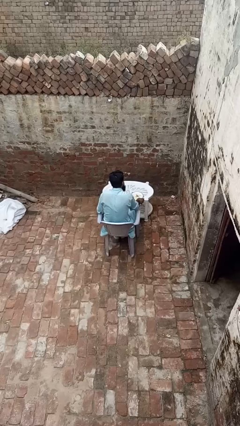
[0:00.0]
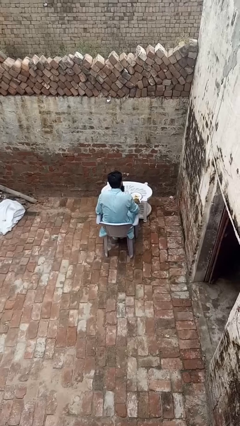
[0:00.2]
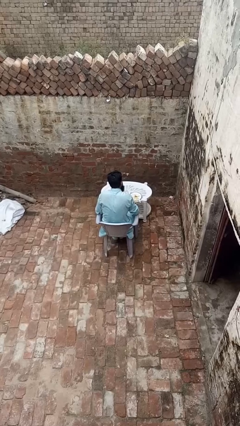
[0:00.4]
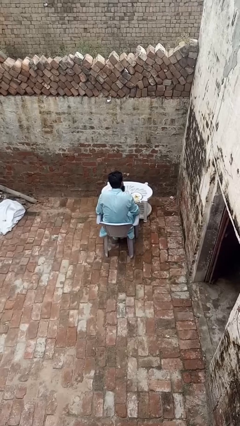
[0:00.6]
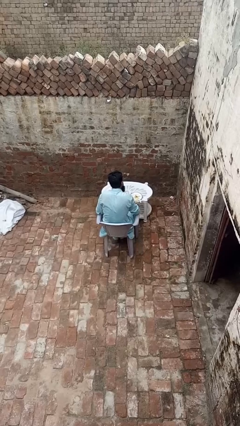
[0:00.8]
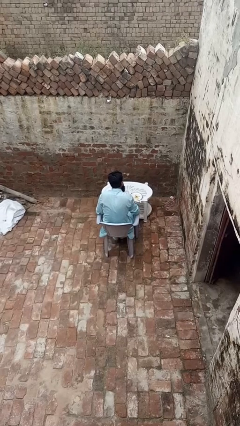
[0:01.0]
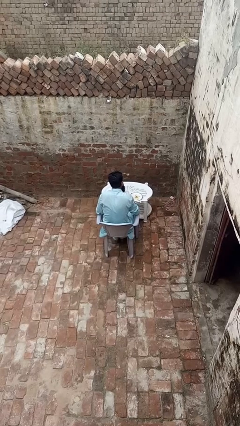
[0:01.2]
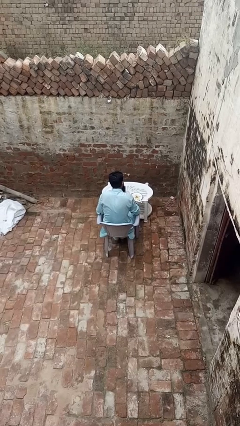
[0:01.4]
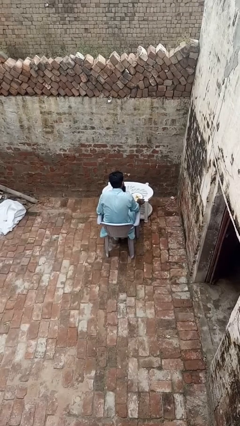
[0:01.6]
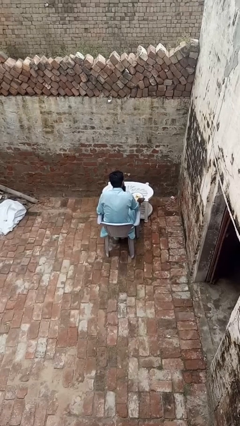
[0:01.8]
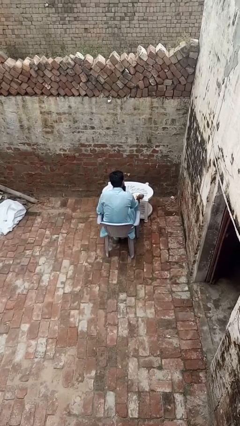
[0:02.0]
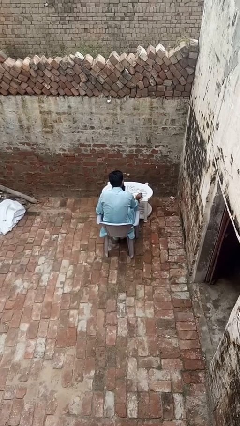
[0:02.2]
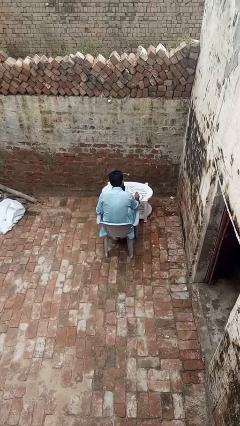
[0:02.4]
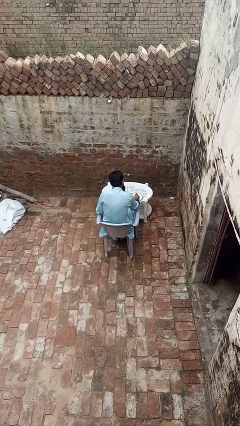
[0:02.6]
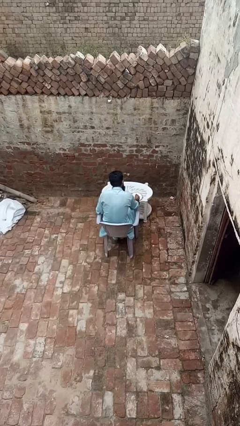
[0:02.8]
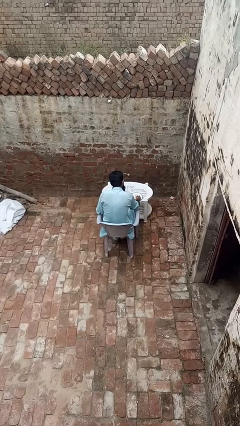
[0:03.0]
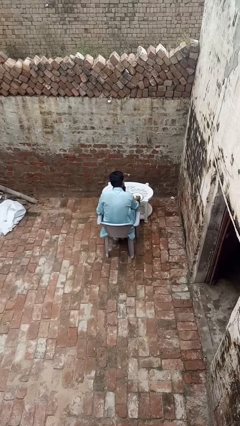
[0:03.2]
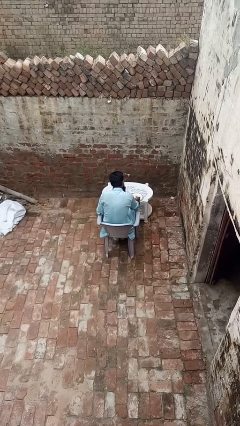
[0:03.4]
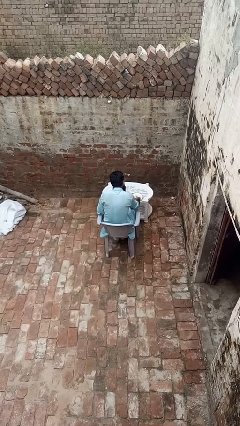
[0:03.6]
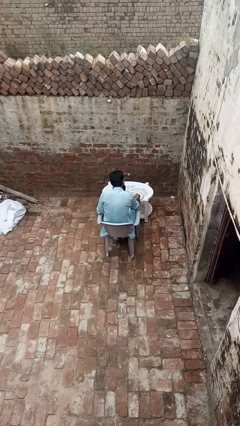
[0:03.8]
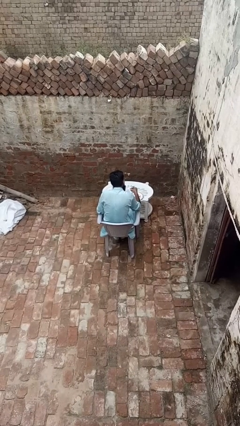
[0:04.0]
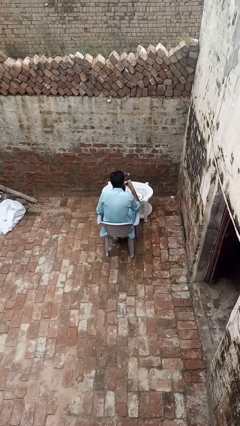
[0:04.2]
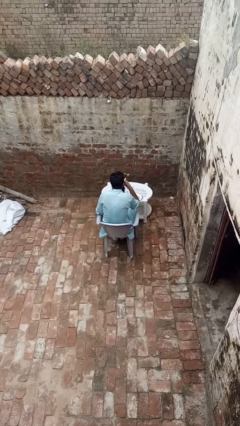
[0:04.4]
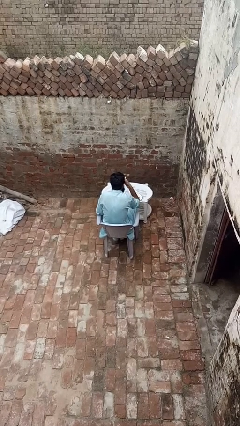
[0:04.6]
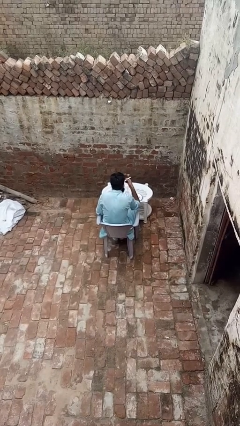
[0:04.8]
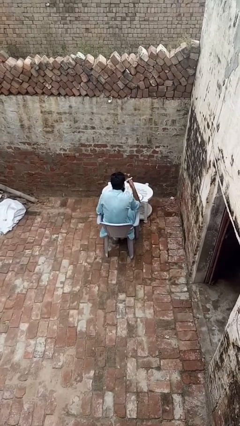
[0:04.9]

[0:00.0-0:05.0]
person eats with utensil

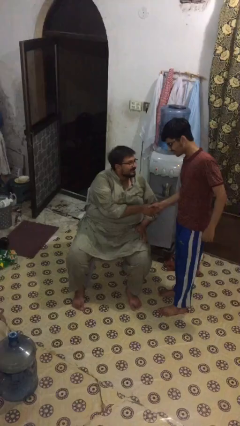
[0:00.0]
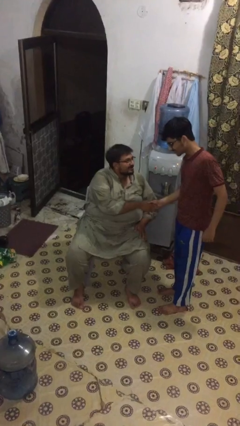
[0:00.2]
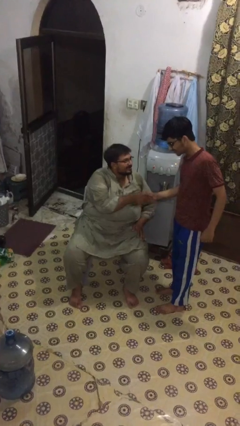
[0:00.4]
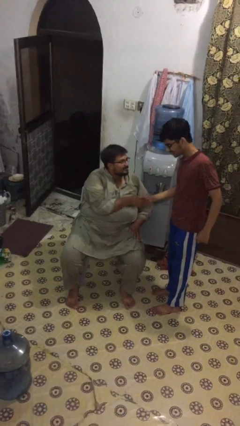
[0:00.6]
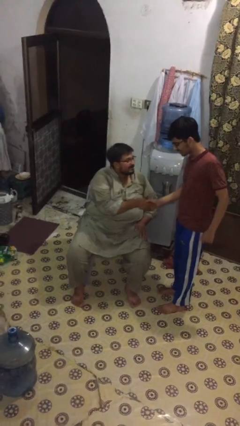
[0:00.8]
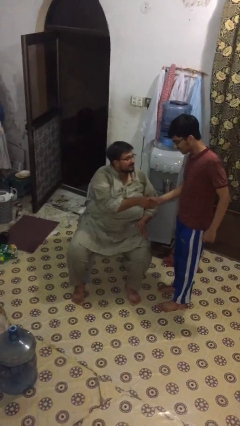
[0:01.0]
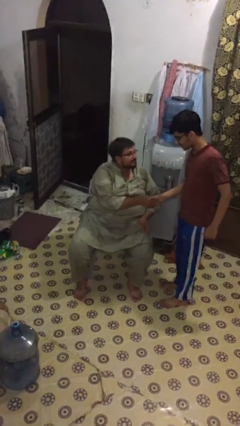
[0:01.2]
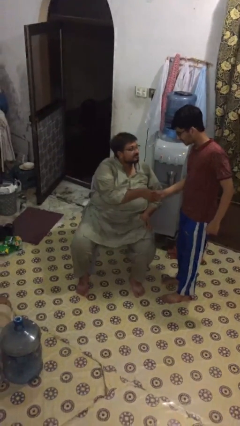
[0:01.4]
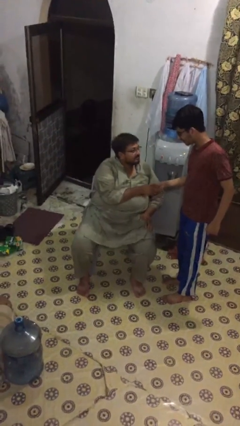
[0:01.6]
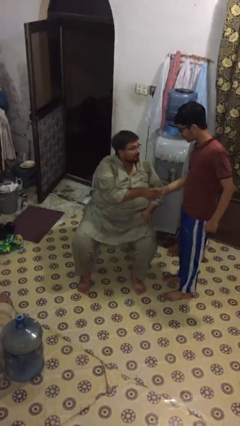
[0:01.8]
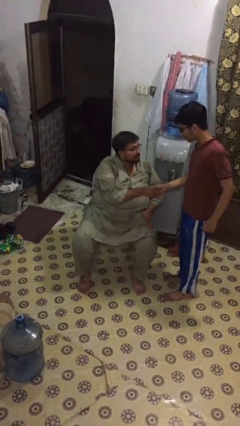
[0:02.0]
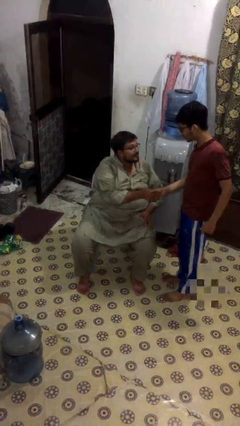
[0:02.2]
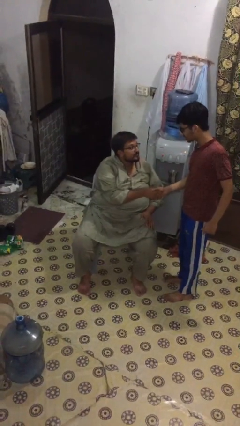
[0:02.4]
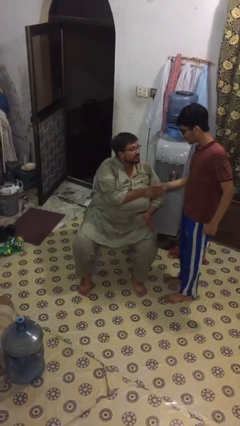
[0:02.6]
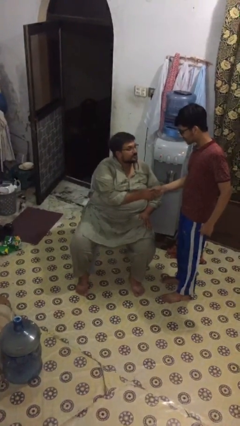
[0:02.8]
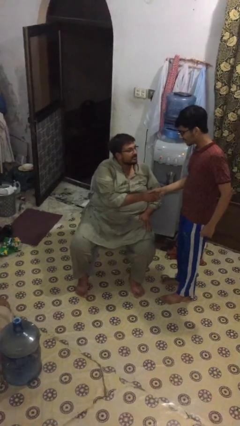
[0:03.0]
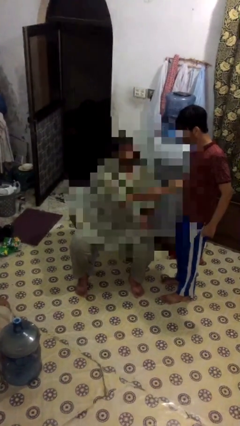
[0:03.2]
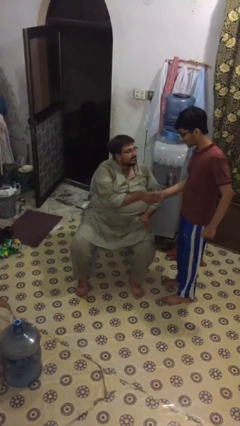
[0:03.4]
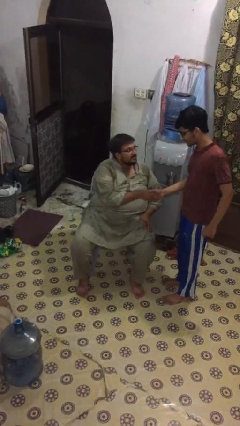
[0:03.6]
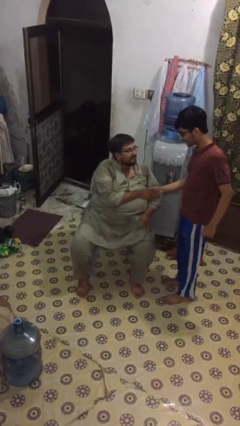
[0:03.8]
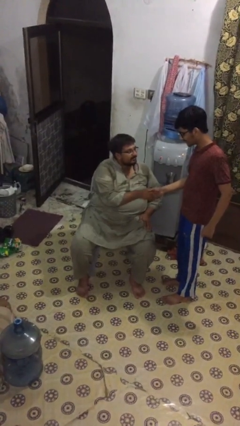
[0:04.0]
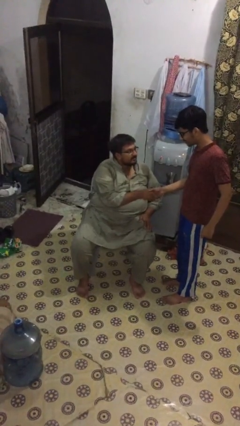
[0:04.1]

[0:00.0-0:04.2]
person shakes hand

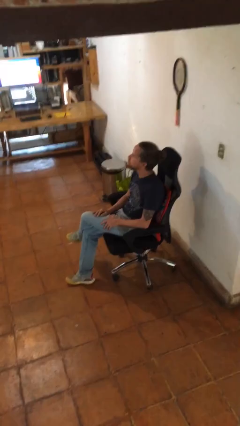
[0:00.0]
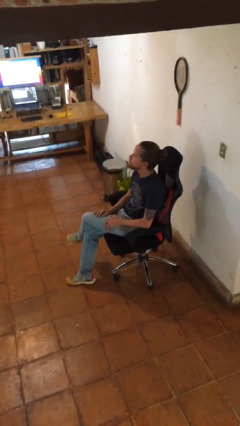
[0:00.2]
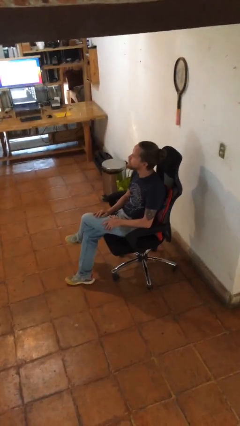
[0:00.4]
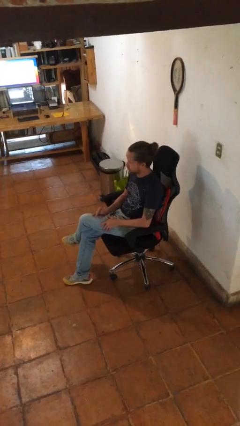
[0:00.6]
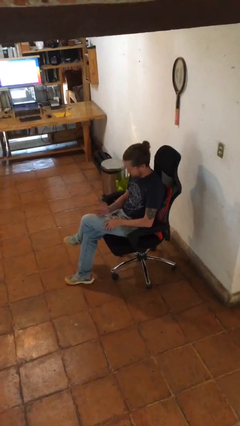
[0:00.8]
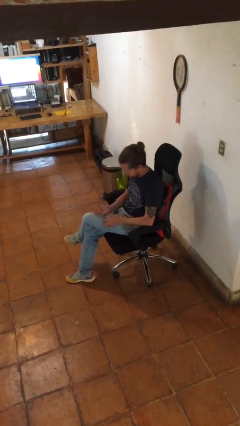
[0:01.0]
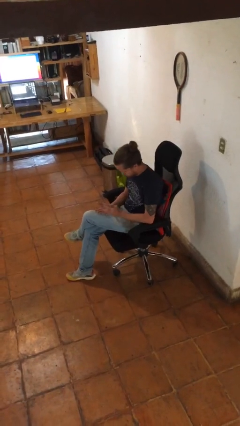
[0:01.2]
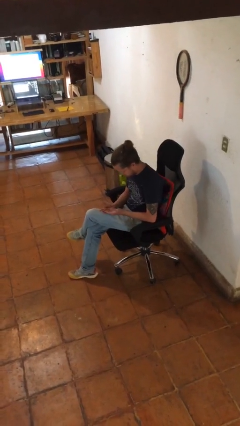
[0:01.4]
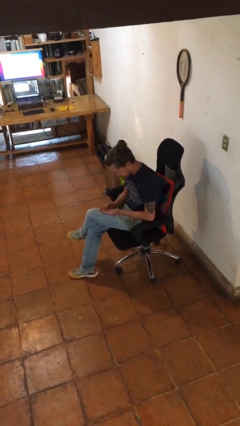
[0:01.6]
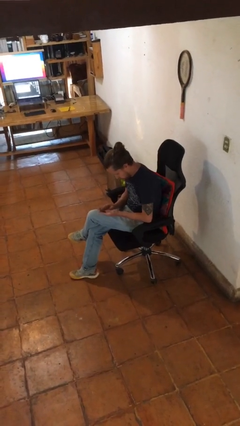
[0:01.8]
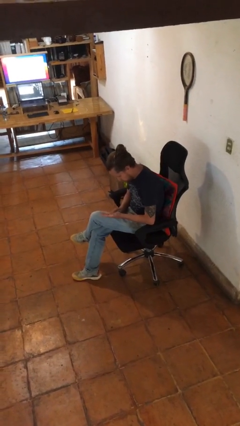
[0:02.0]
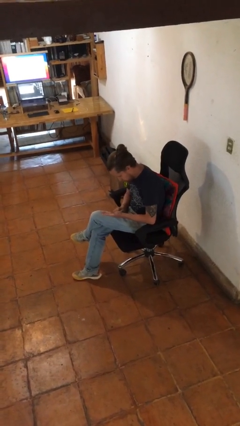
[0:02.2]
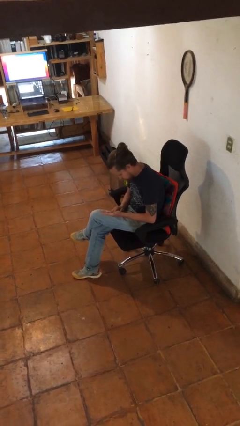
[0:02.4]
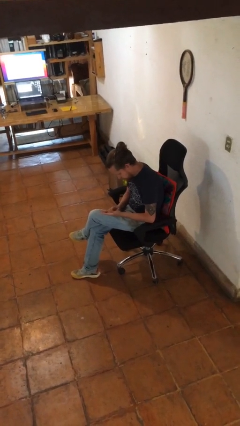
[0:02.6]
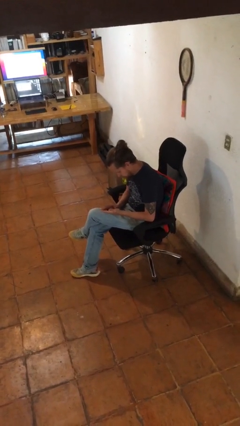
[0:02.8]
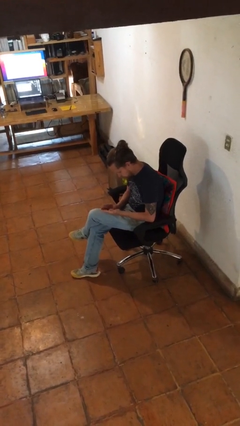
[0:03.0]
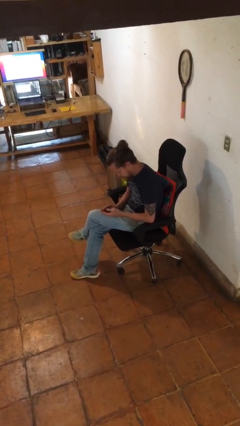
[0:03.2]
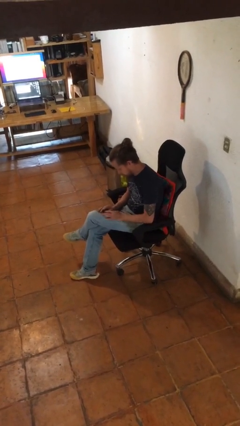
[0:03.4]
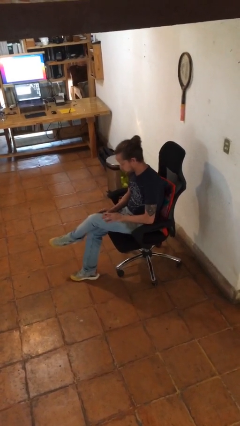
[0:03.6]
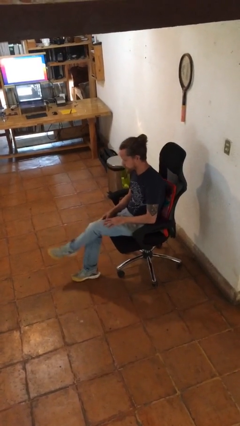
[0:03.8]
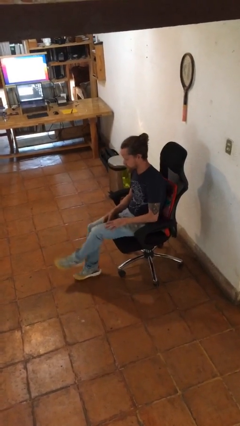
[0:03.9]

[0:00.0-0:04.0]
person looks at hands in lap

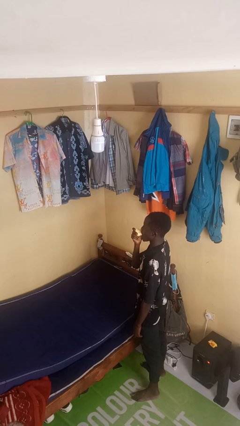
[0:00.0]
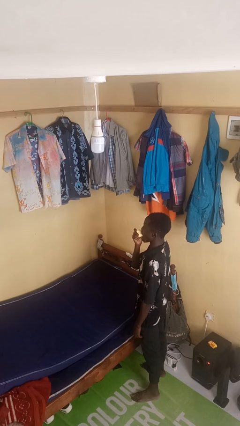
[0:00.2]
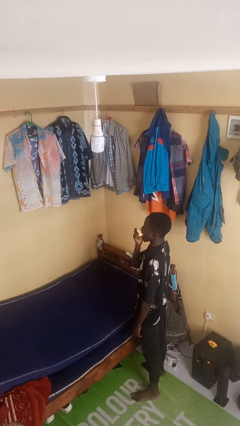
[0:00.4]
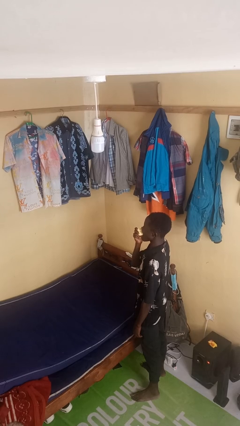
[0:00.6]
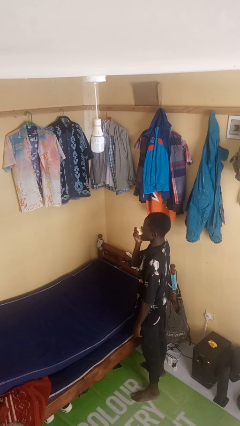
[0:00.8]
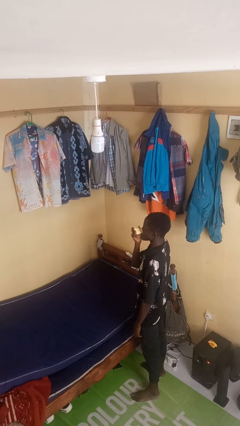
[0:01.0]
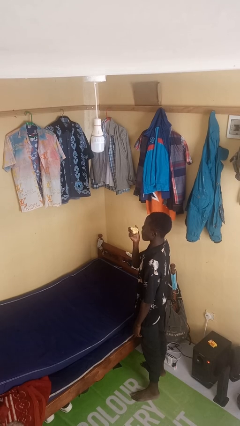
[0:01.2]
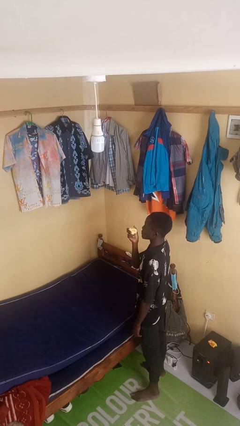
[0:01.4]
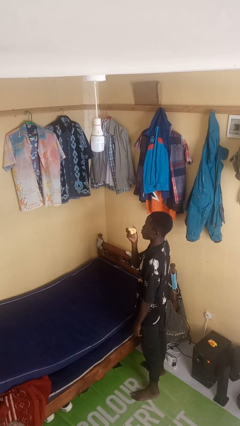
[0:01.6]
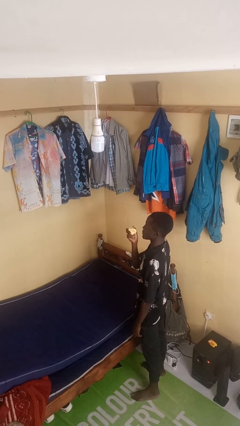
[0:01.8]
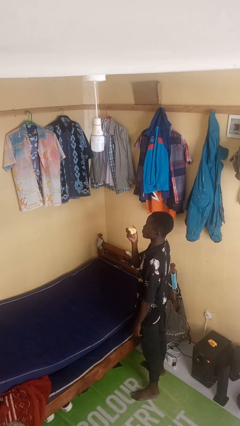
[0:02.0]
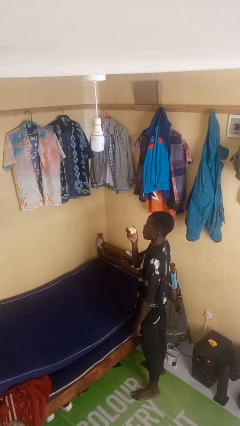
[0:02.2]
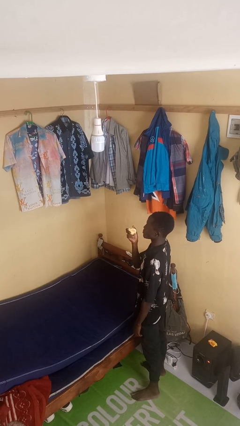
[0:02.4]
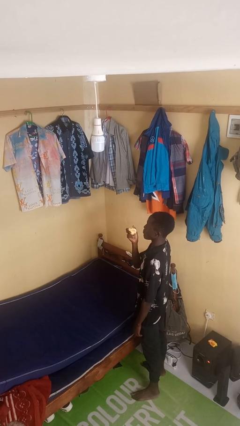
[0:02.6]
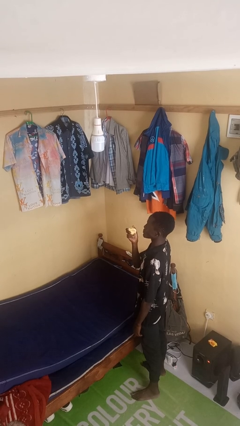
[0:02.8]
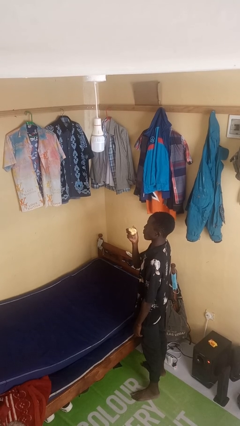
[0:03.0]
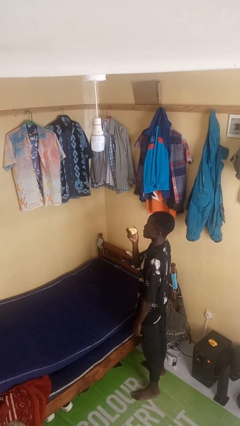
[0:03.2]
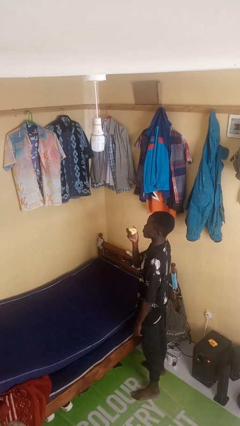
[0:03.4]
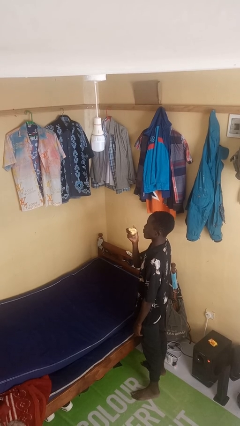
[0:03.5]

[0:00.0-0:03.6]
person eats apple

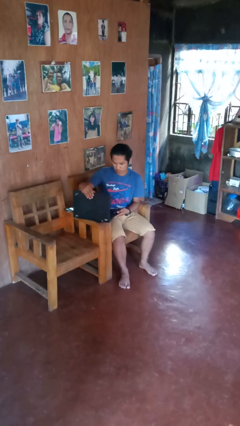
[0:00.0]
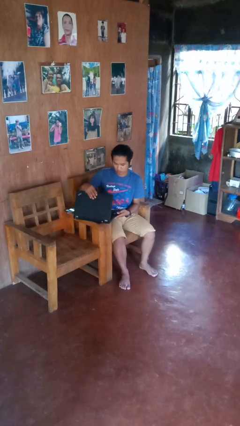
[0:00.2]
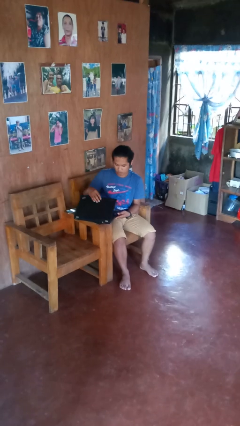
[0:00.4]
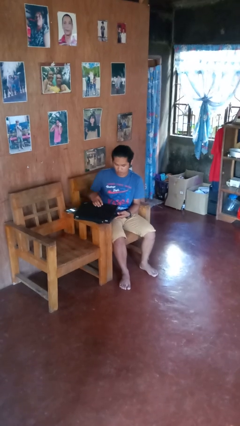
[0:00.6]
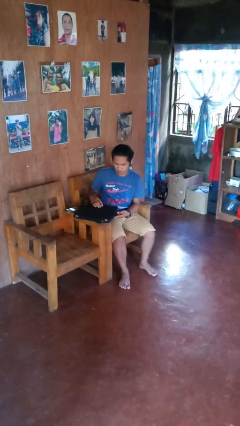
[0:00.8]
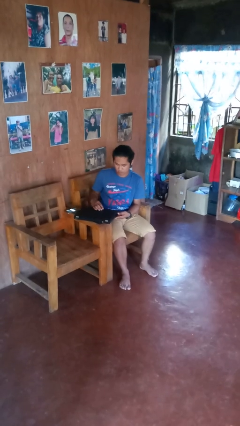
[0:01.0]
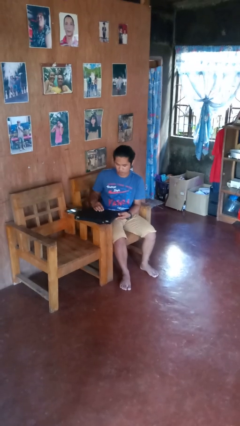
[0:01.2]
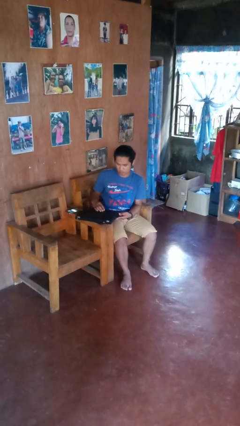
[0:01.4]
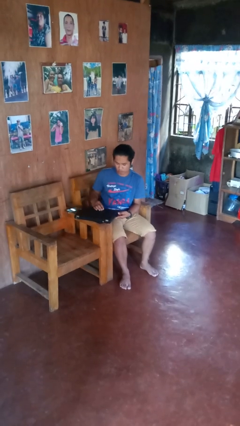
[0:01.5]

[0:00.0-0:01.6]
person closes laptop
